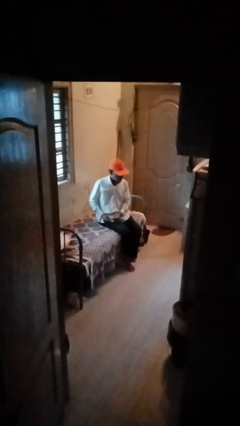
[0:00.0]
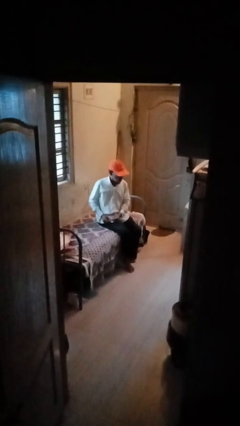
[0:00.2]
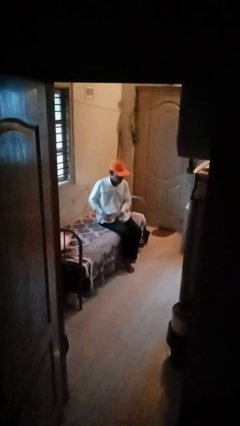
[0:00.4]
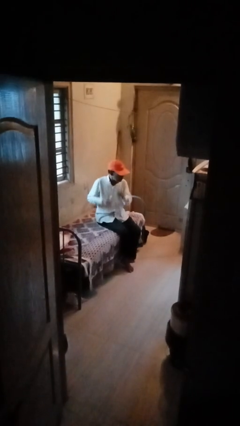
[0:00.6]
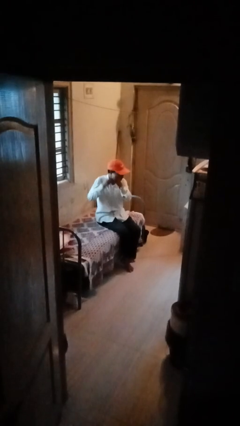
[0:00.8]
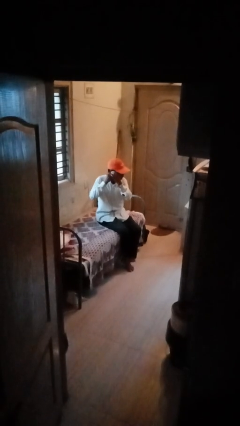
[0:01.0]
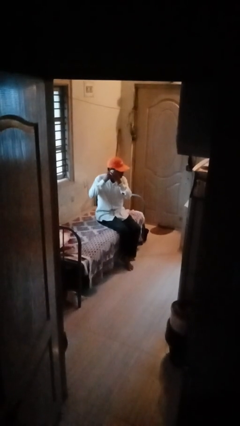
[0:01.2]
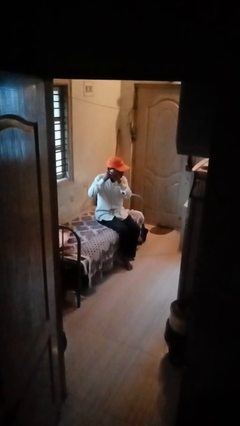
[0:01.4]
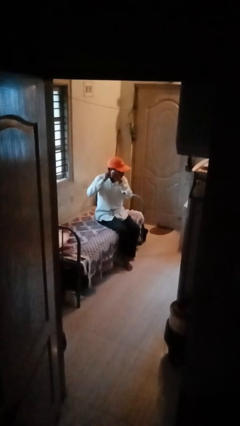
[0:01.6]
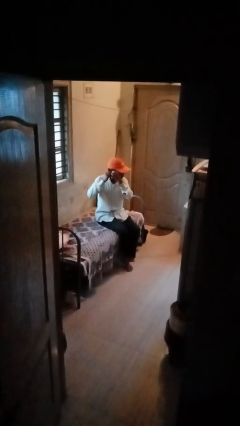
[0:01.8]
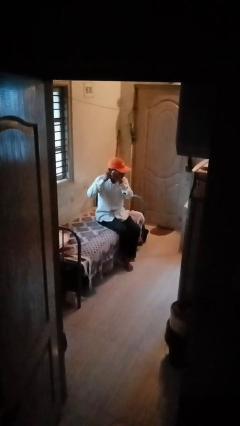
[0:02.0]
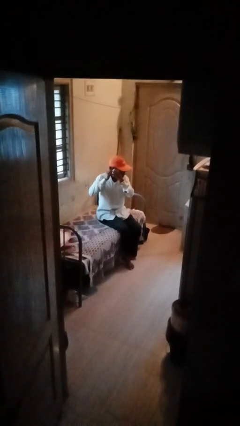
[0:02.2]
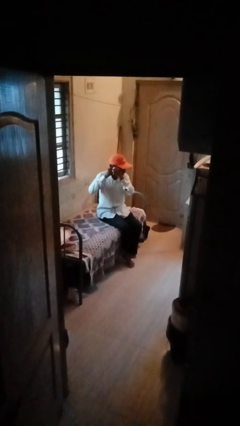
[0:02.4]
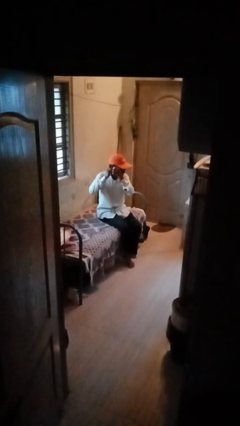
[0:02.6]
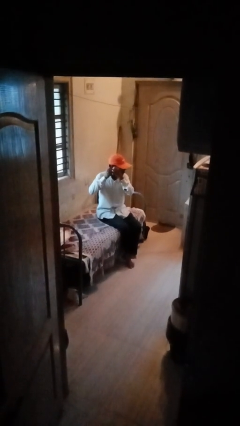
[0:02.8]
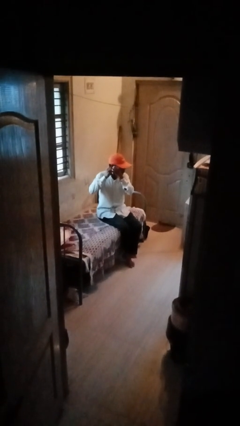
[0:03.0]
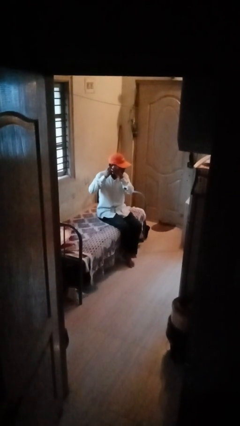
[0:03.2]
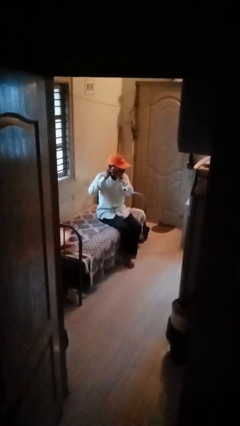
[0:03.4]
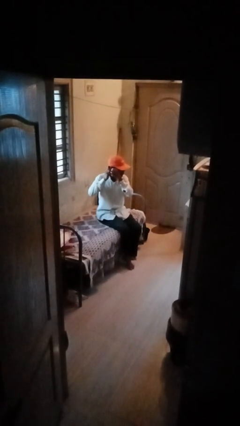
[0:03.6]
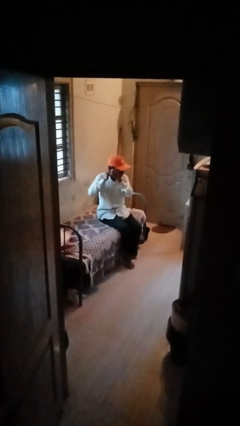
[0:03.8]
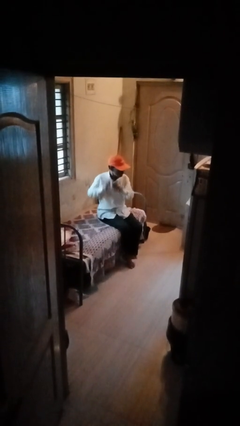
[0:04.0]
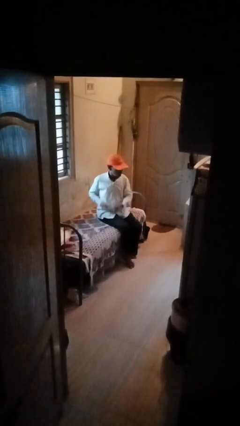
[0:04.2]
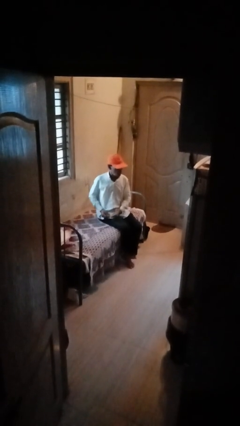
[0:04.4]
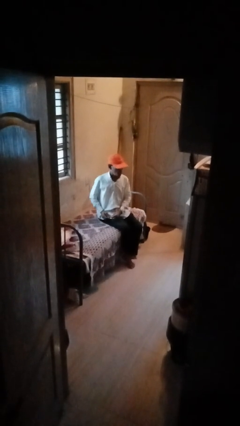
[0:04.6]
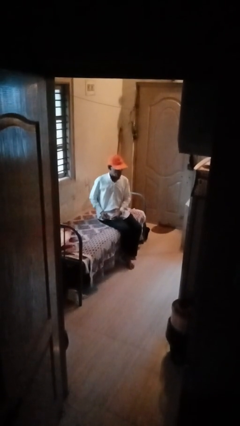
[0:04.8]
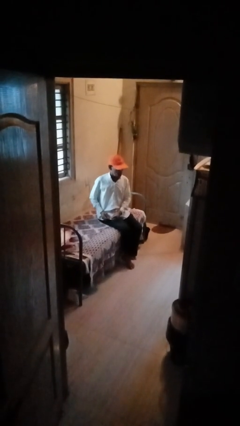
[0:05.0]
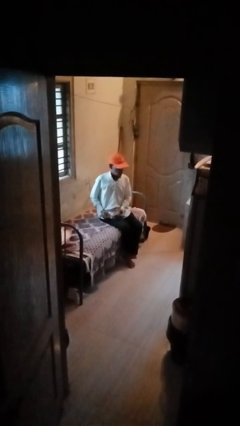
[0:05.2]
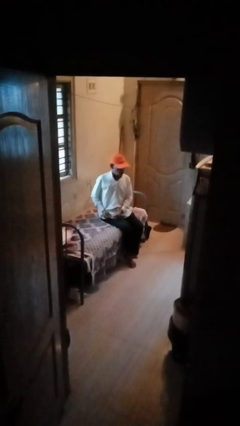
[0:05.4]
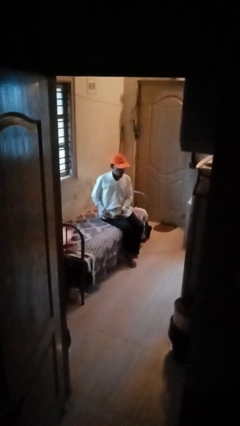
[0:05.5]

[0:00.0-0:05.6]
person takes off earrings

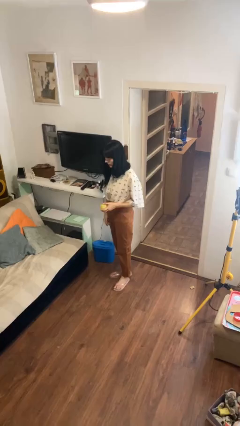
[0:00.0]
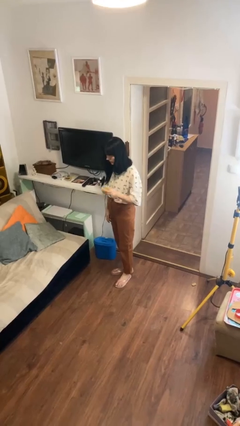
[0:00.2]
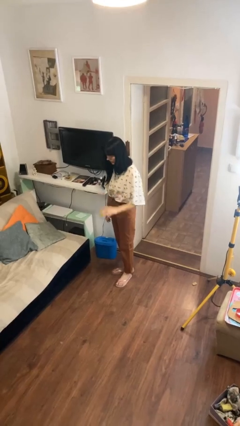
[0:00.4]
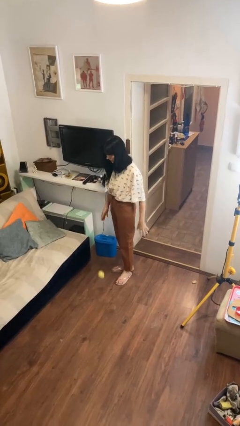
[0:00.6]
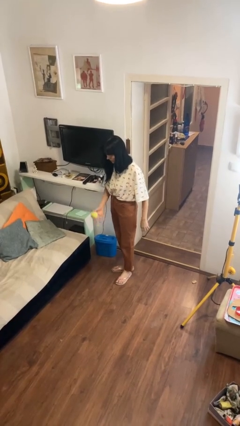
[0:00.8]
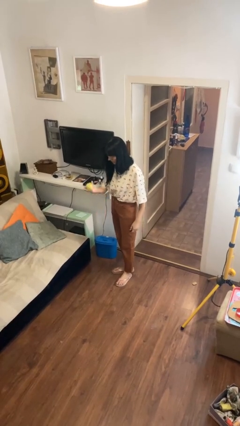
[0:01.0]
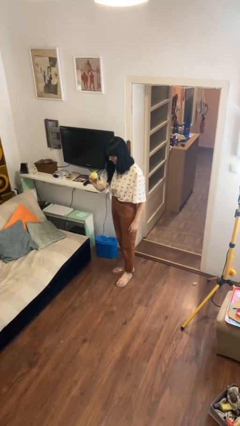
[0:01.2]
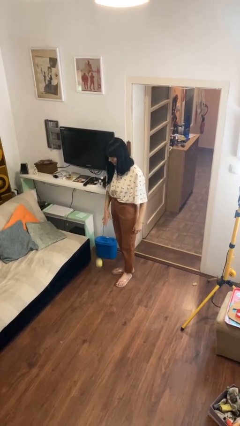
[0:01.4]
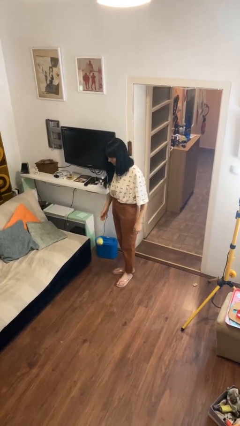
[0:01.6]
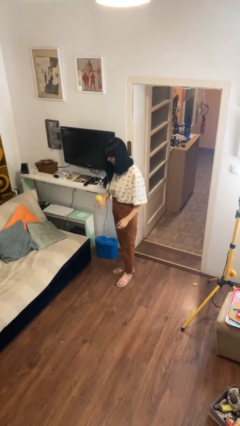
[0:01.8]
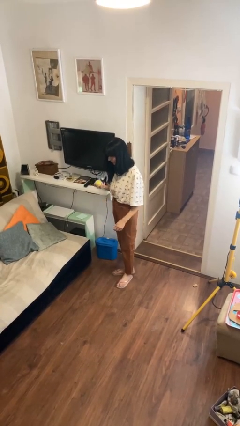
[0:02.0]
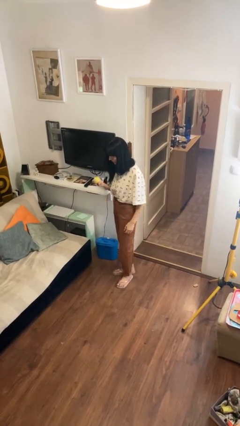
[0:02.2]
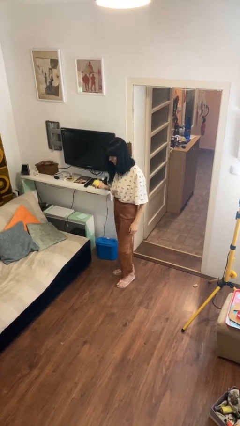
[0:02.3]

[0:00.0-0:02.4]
person bounces ball on floor

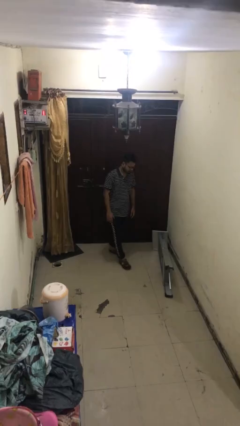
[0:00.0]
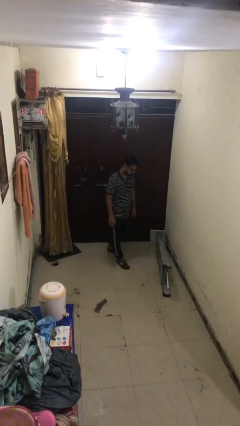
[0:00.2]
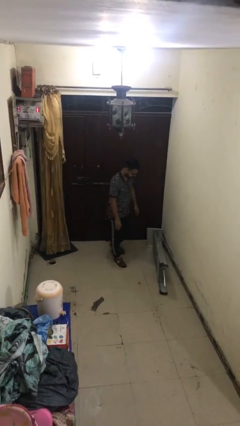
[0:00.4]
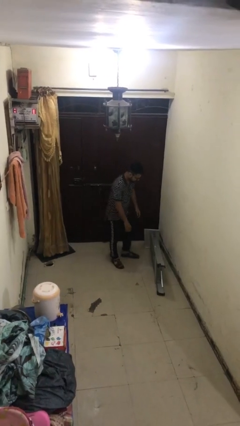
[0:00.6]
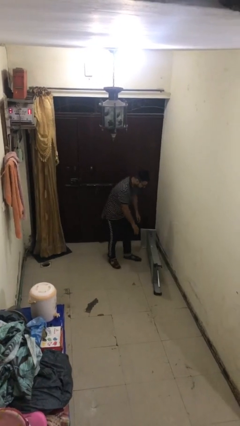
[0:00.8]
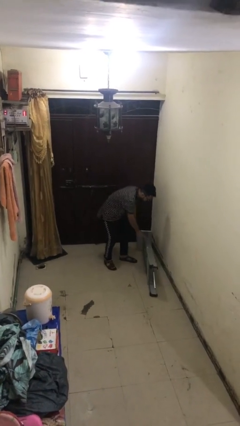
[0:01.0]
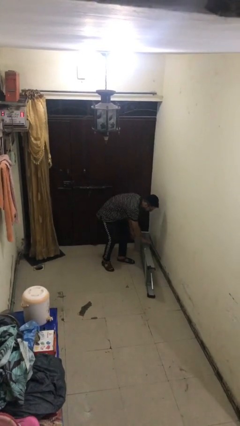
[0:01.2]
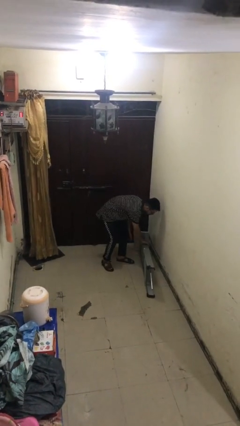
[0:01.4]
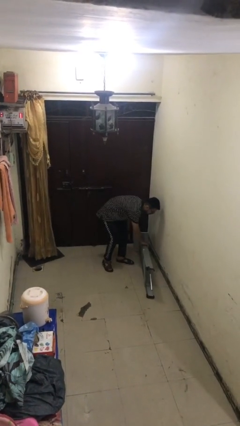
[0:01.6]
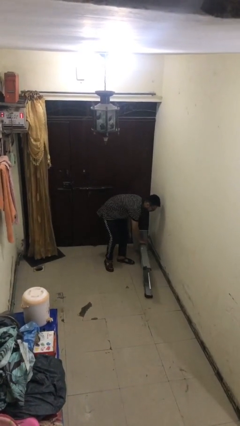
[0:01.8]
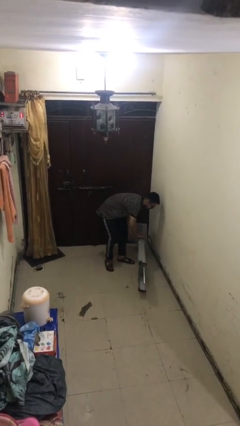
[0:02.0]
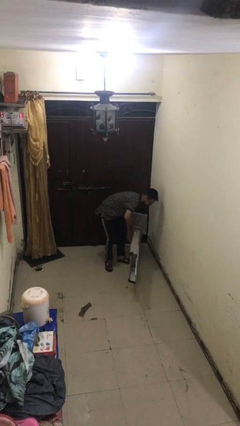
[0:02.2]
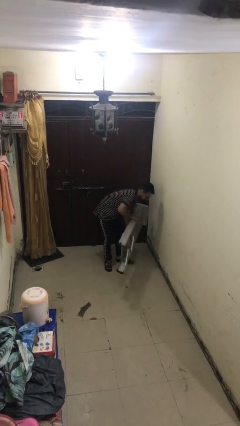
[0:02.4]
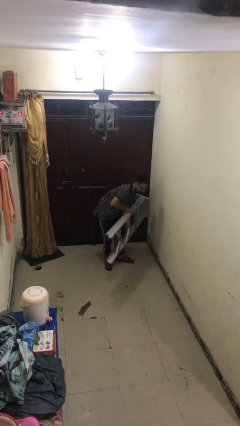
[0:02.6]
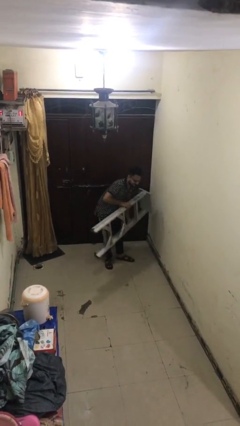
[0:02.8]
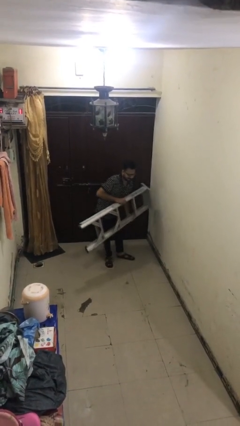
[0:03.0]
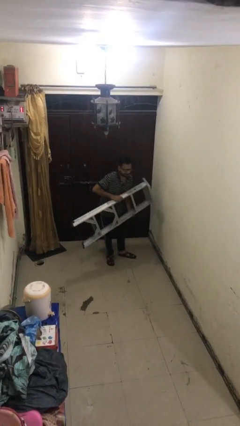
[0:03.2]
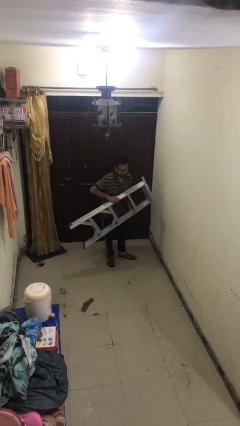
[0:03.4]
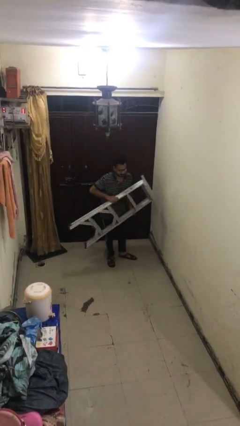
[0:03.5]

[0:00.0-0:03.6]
person picks up object from floor

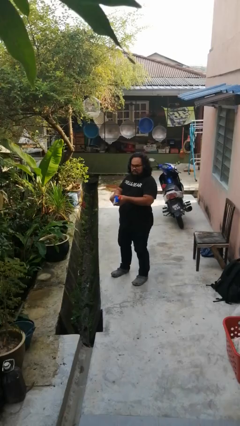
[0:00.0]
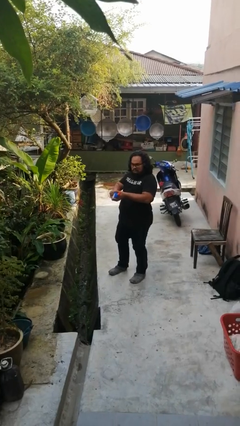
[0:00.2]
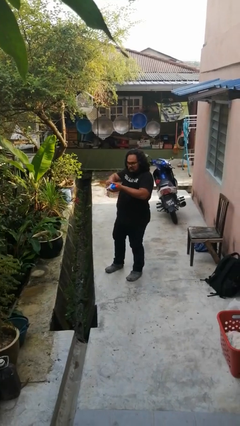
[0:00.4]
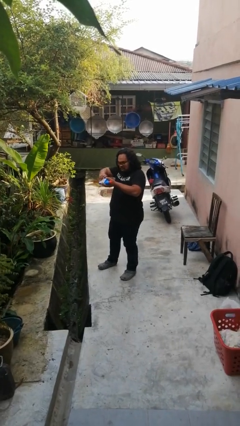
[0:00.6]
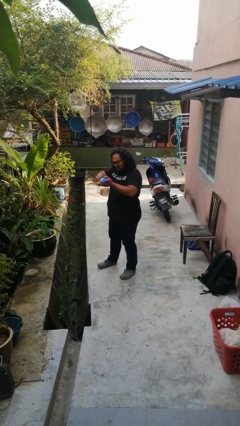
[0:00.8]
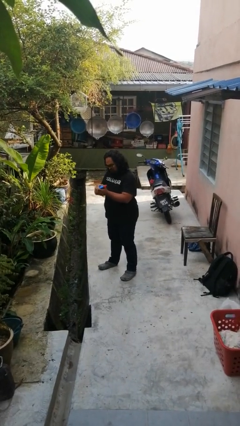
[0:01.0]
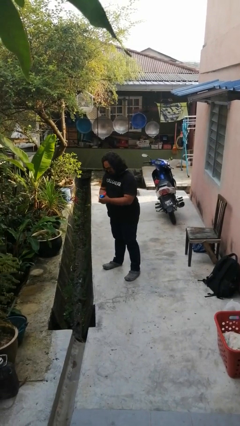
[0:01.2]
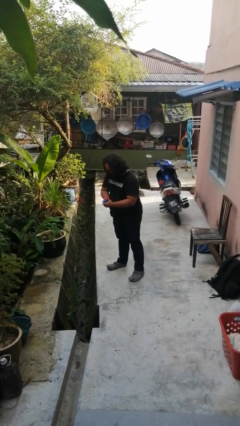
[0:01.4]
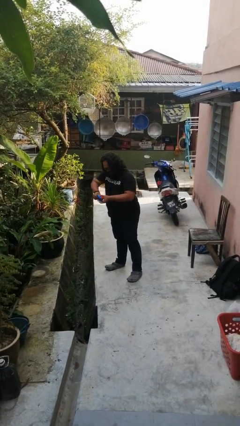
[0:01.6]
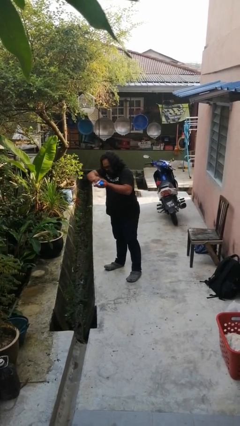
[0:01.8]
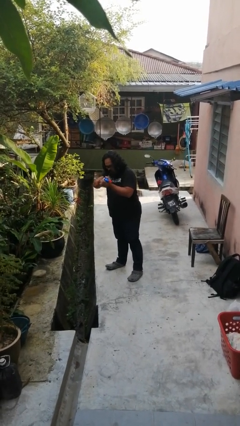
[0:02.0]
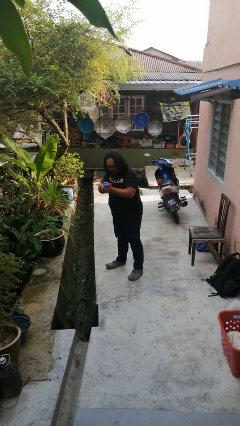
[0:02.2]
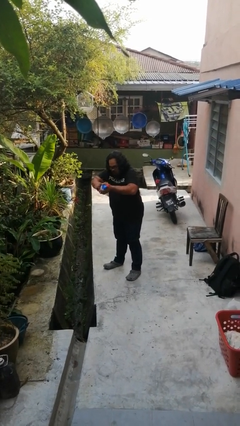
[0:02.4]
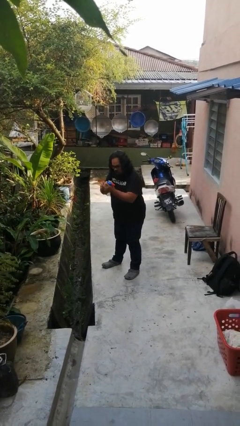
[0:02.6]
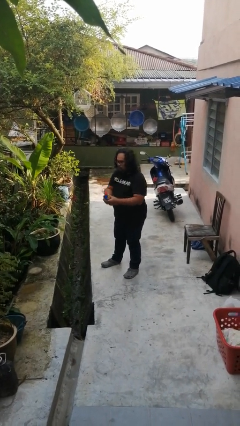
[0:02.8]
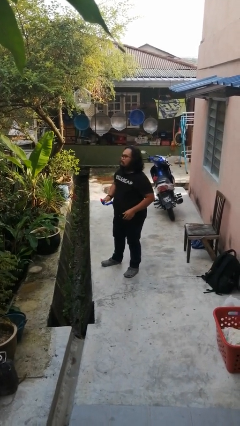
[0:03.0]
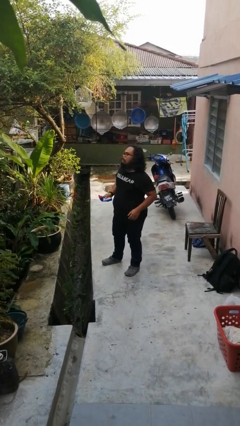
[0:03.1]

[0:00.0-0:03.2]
person squeezes object

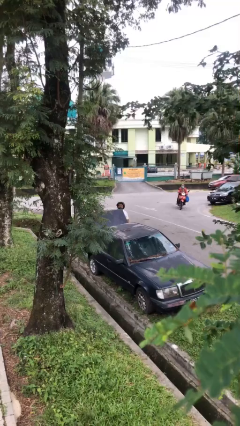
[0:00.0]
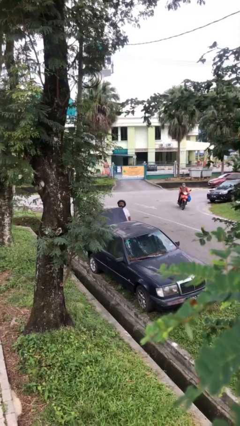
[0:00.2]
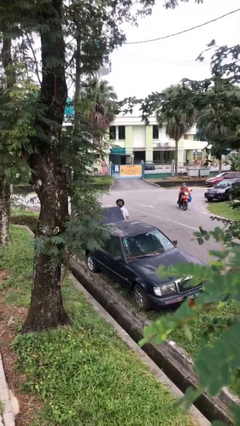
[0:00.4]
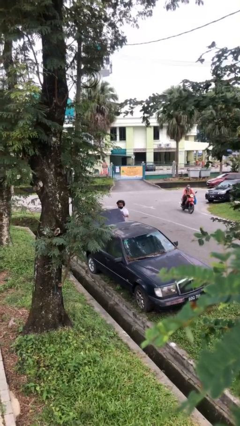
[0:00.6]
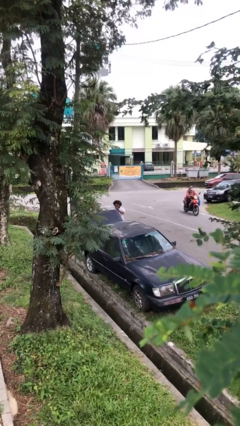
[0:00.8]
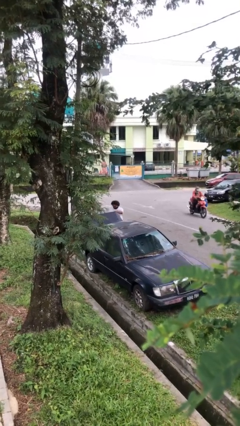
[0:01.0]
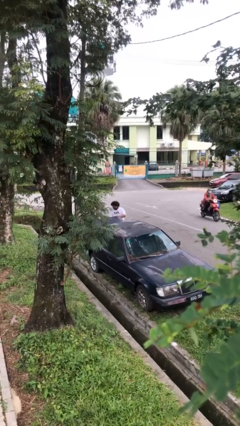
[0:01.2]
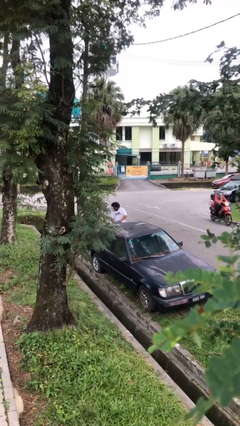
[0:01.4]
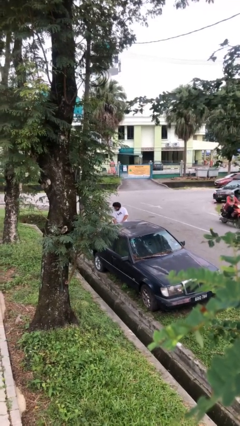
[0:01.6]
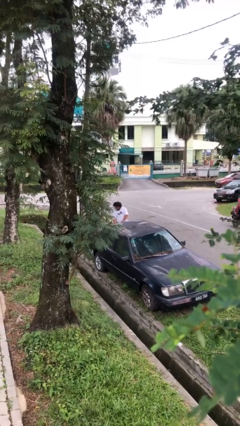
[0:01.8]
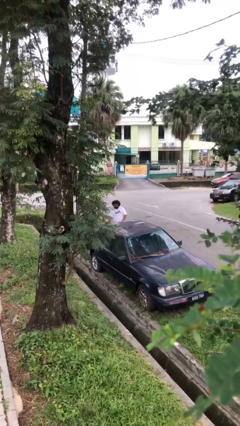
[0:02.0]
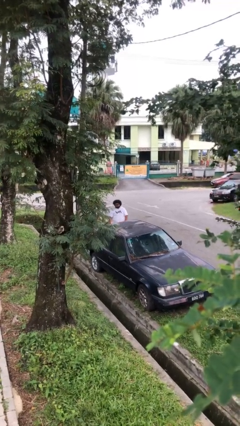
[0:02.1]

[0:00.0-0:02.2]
person closes car trunk

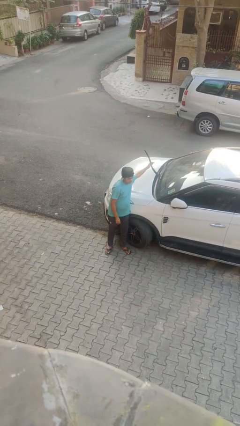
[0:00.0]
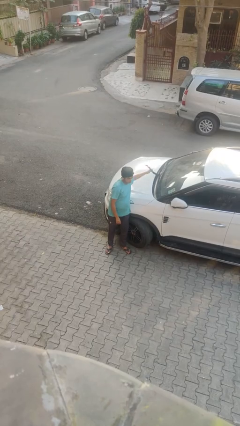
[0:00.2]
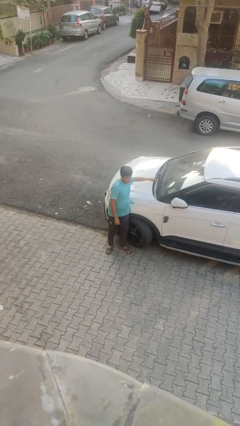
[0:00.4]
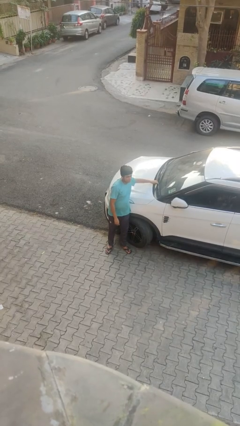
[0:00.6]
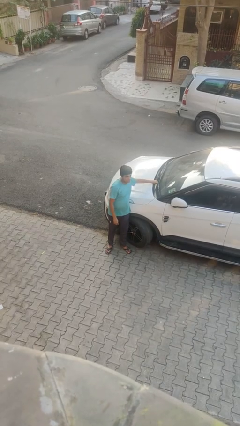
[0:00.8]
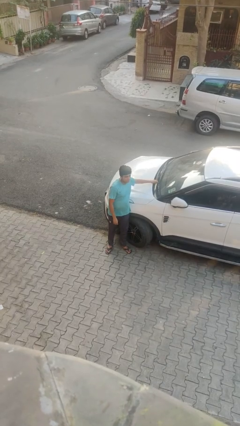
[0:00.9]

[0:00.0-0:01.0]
person flips down car wipers
